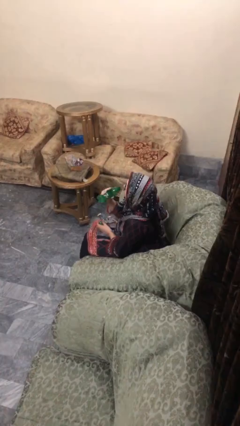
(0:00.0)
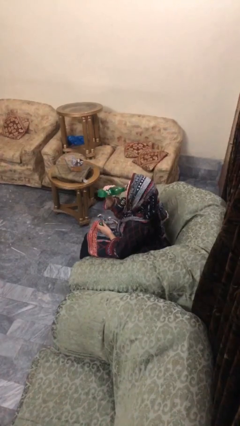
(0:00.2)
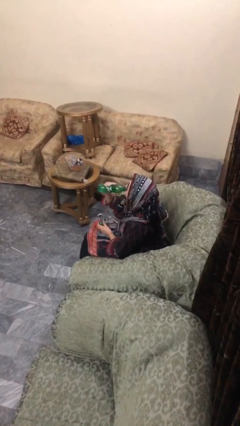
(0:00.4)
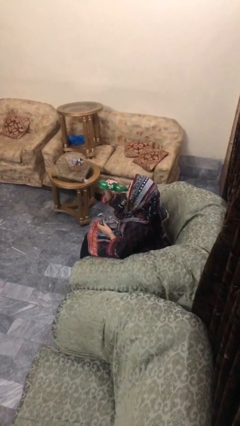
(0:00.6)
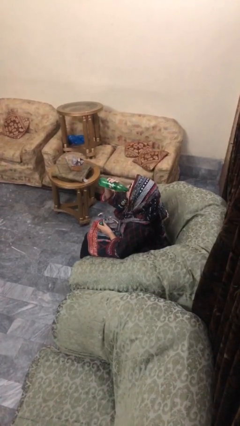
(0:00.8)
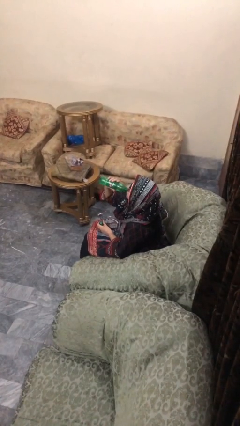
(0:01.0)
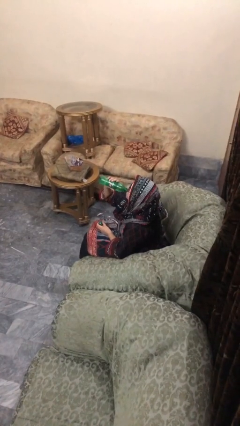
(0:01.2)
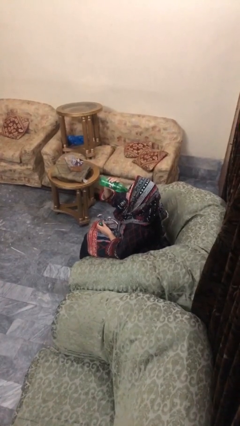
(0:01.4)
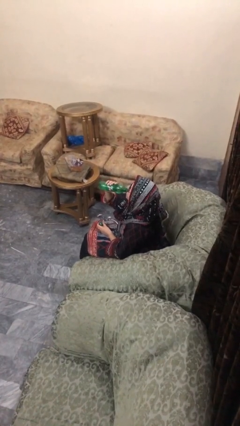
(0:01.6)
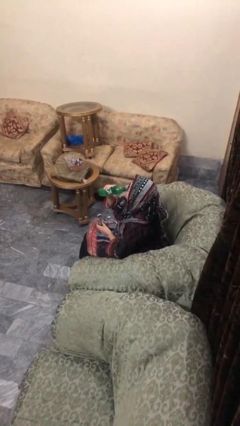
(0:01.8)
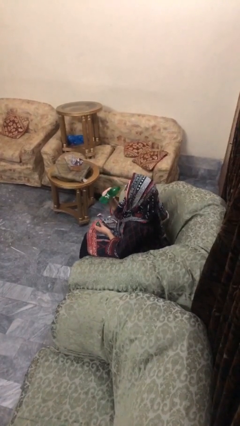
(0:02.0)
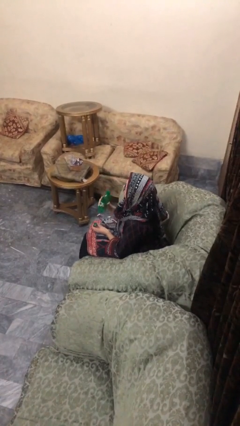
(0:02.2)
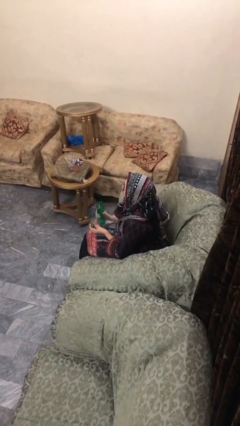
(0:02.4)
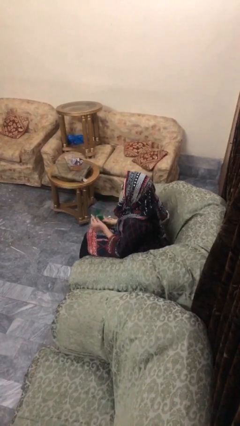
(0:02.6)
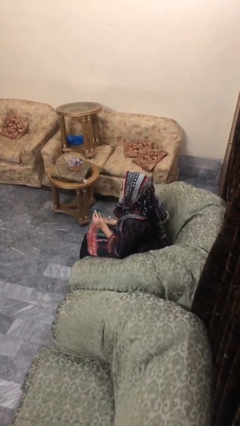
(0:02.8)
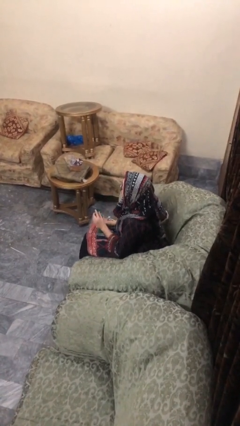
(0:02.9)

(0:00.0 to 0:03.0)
person drinks from bottle

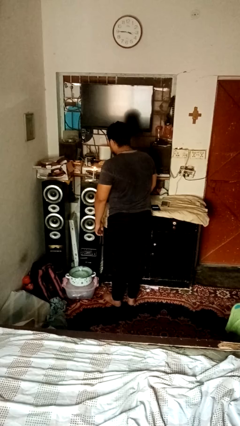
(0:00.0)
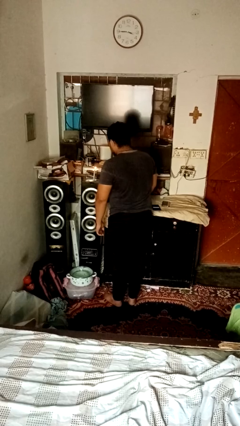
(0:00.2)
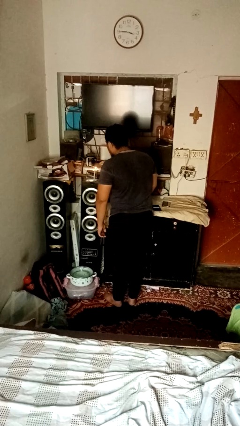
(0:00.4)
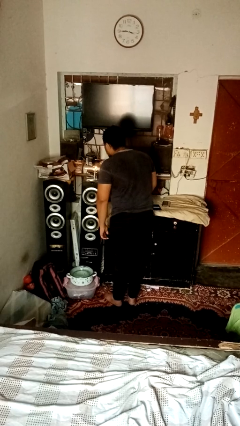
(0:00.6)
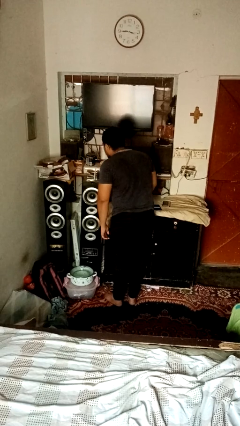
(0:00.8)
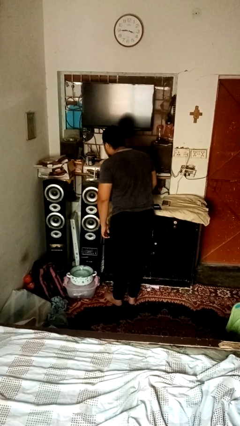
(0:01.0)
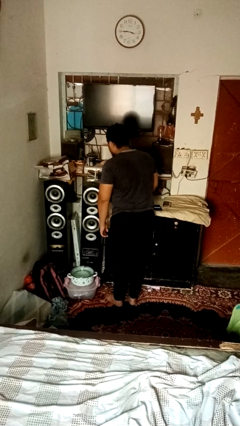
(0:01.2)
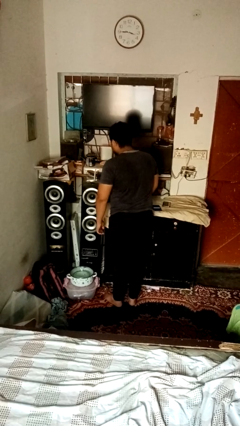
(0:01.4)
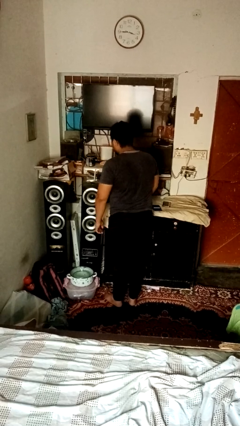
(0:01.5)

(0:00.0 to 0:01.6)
person extinguishes candle

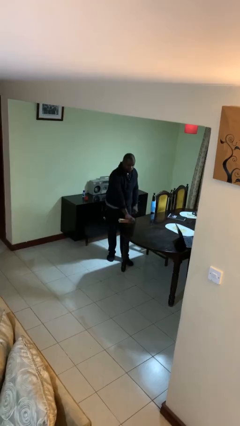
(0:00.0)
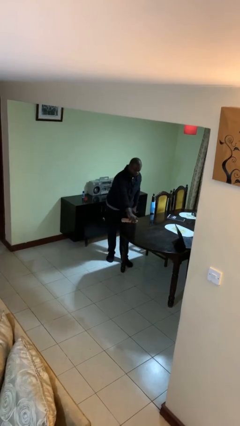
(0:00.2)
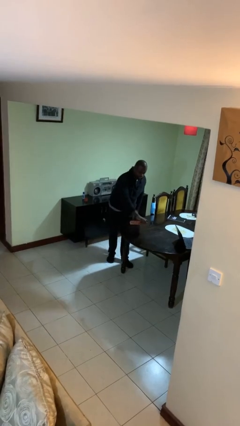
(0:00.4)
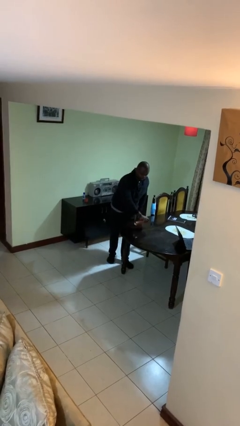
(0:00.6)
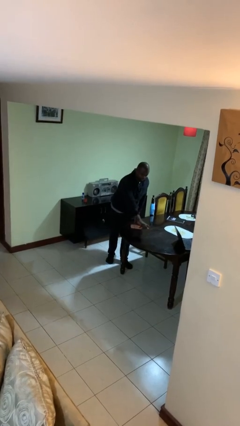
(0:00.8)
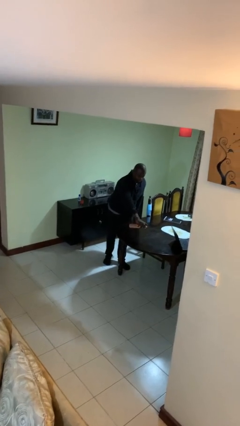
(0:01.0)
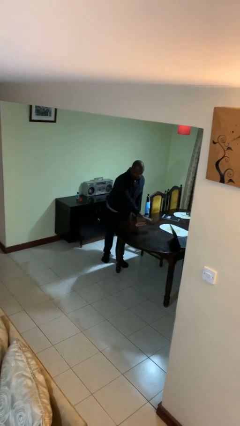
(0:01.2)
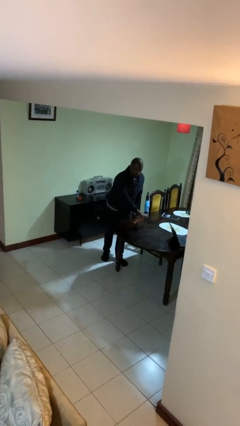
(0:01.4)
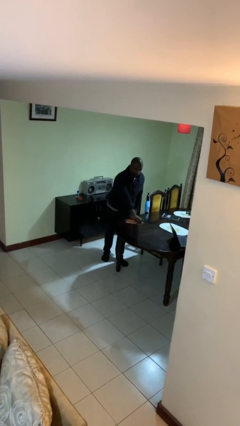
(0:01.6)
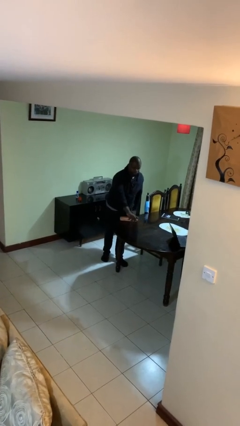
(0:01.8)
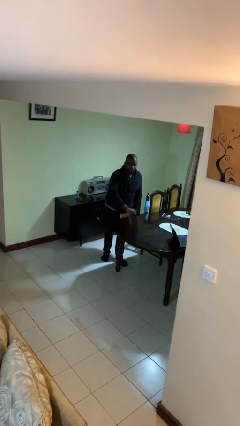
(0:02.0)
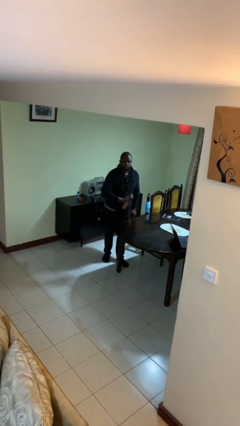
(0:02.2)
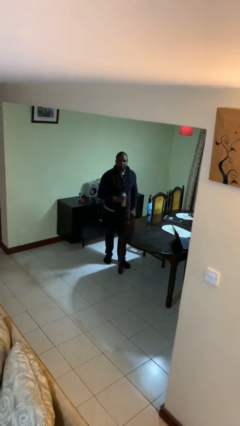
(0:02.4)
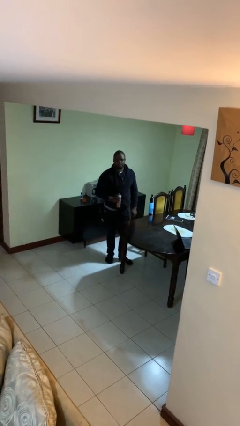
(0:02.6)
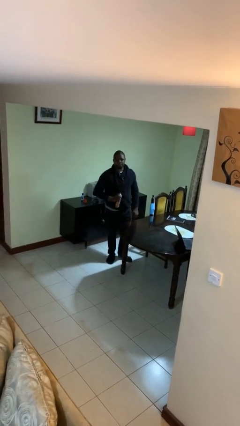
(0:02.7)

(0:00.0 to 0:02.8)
person sprays from bottle

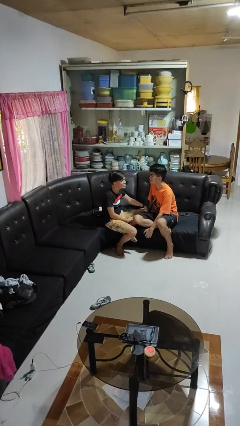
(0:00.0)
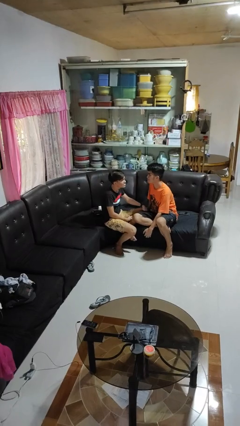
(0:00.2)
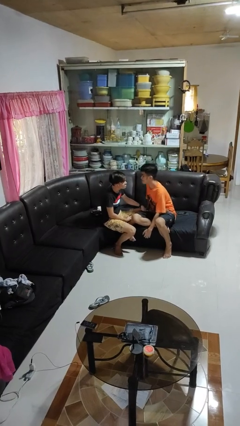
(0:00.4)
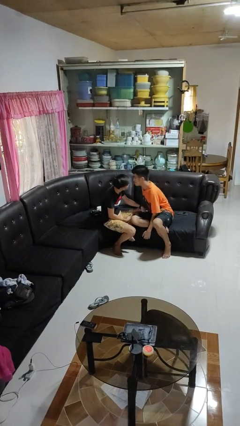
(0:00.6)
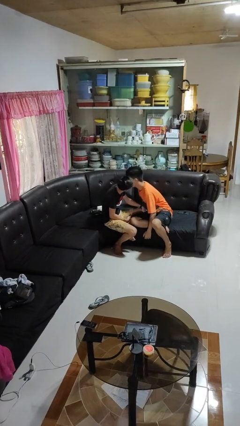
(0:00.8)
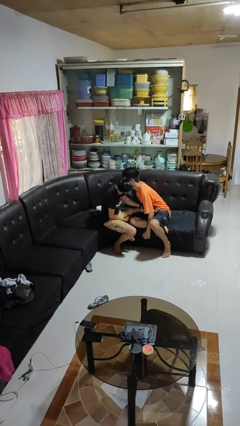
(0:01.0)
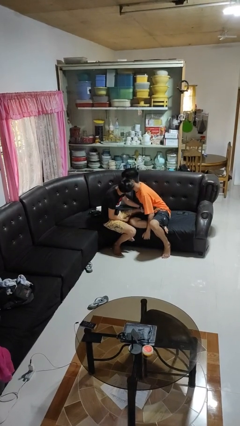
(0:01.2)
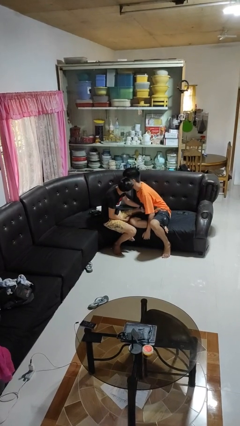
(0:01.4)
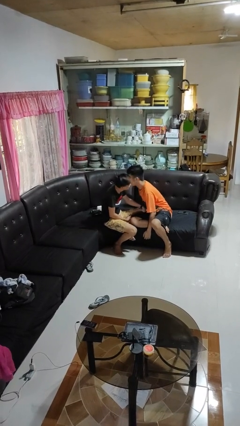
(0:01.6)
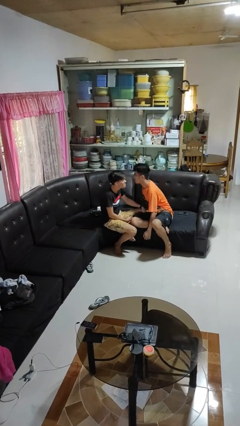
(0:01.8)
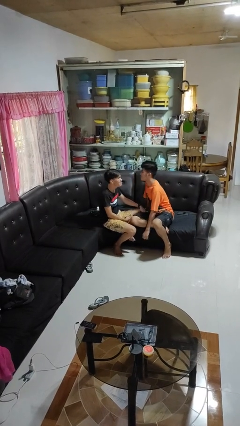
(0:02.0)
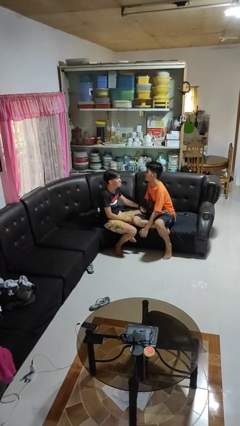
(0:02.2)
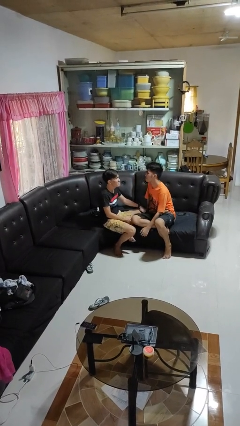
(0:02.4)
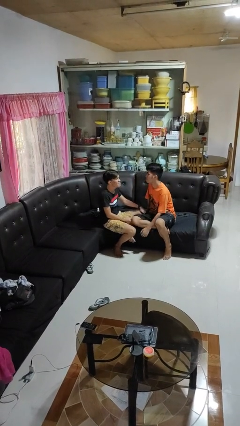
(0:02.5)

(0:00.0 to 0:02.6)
person kisses cheek of person

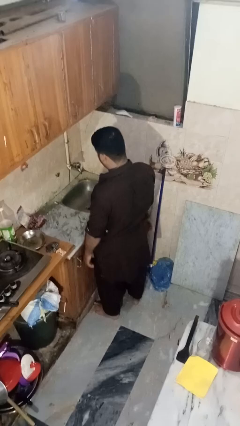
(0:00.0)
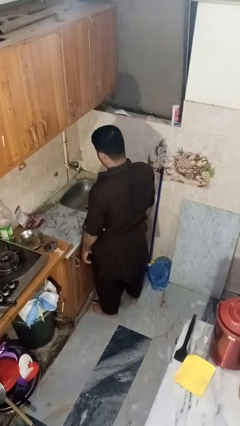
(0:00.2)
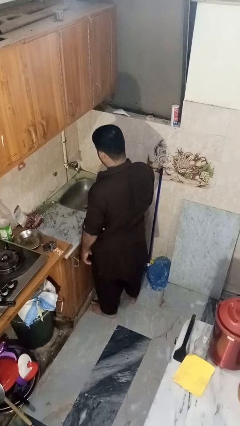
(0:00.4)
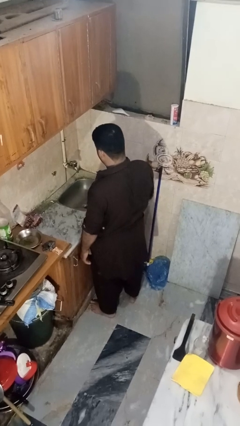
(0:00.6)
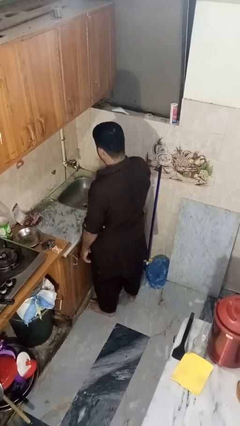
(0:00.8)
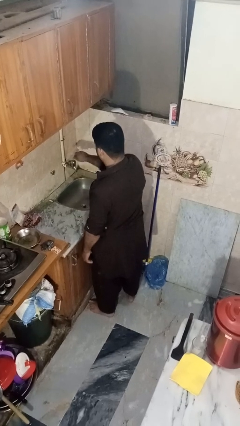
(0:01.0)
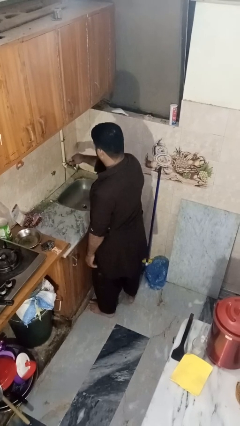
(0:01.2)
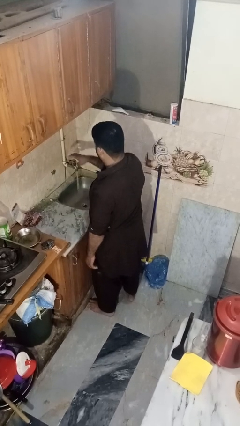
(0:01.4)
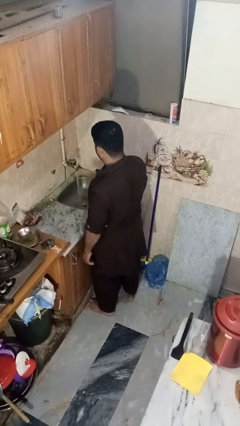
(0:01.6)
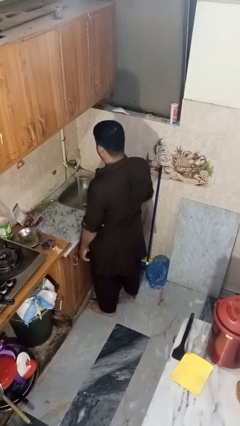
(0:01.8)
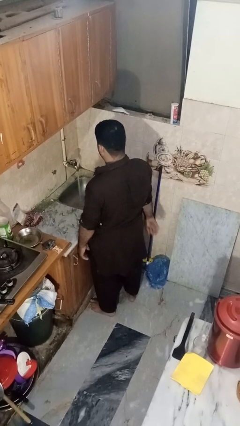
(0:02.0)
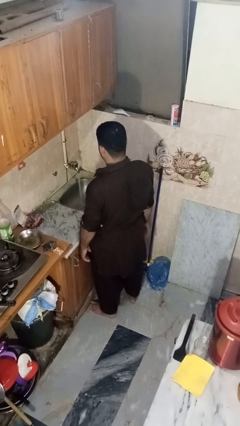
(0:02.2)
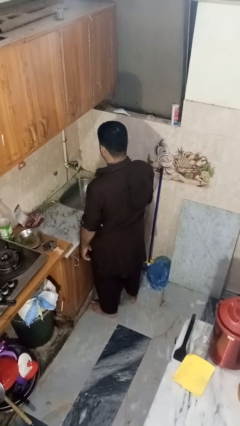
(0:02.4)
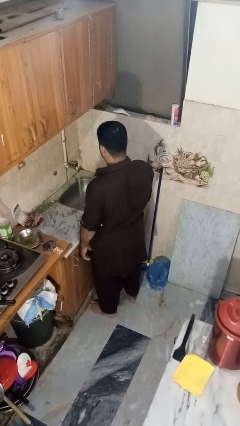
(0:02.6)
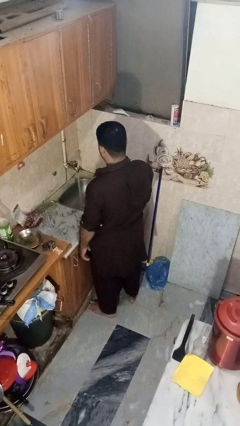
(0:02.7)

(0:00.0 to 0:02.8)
person turns on faucet

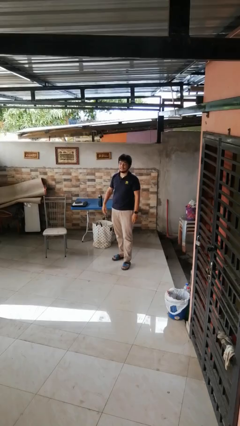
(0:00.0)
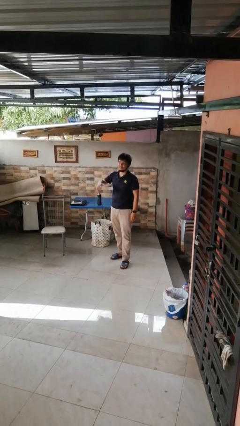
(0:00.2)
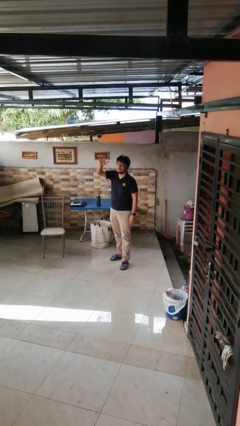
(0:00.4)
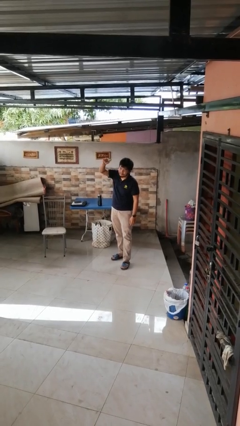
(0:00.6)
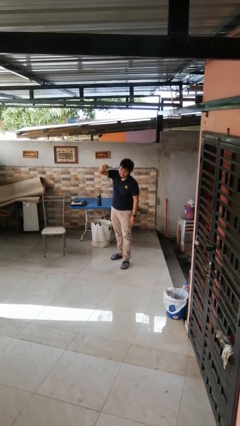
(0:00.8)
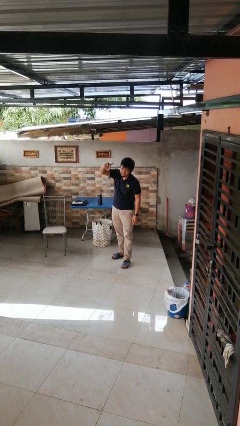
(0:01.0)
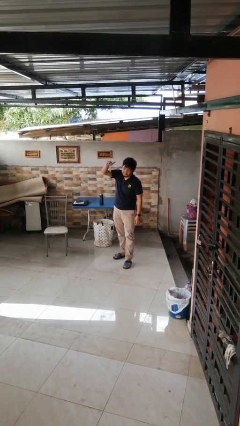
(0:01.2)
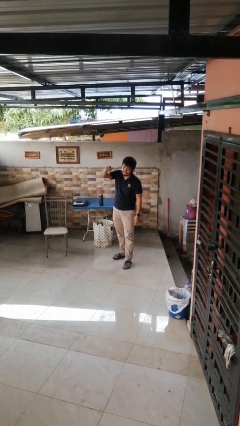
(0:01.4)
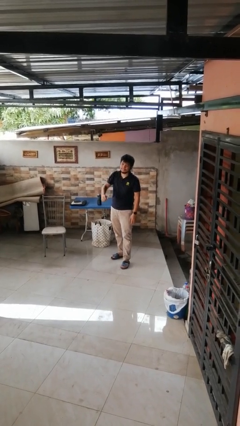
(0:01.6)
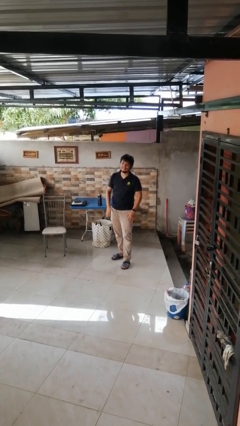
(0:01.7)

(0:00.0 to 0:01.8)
person gestures come here

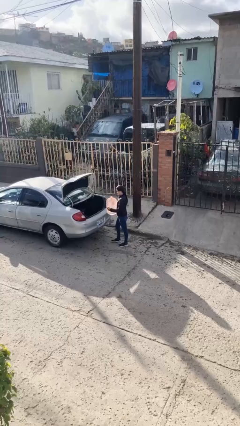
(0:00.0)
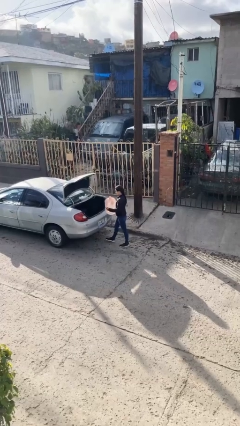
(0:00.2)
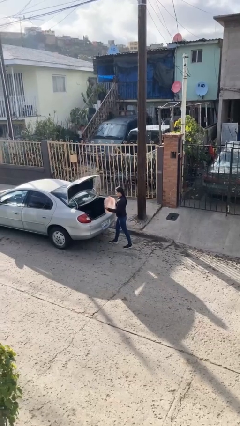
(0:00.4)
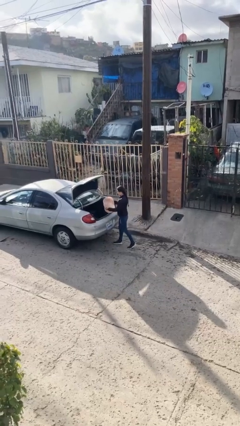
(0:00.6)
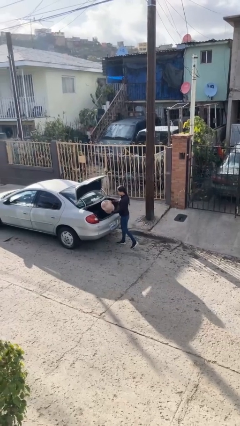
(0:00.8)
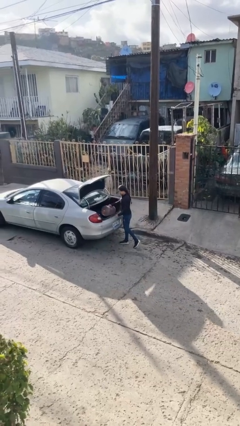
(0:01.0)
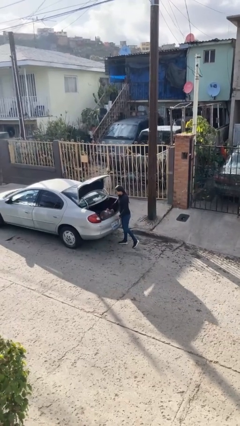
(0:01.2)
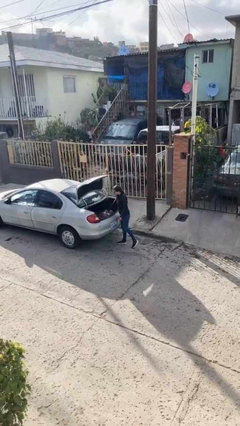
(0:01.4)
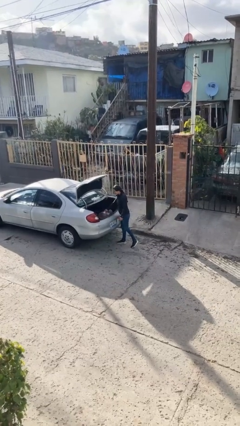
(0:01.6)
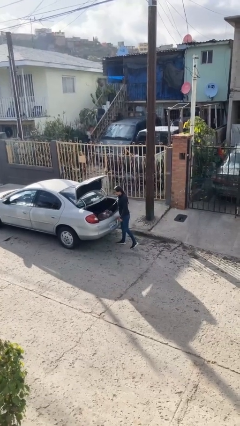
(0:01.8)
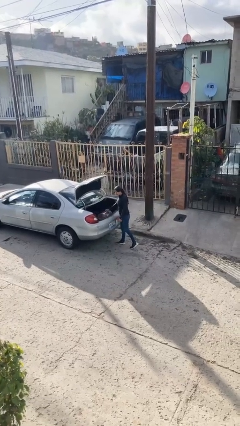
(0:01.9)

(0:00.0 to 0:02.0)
person loads car
